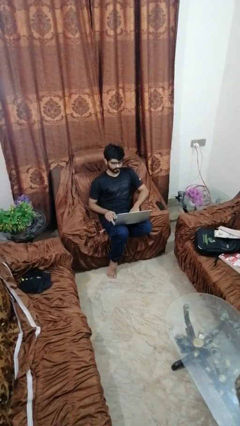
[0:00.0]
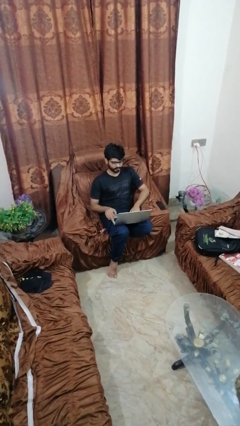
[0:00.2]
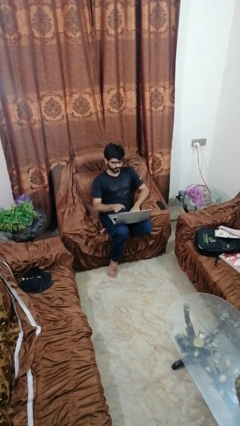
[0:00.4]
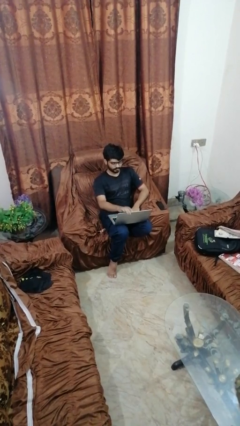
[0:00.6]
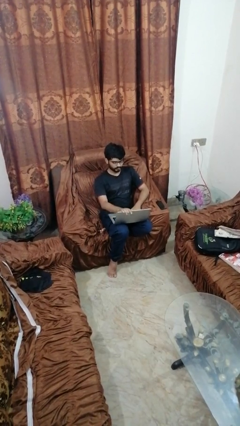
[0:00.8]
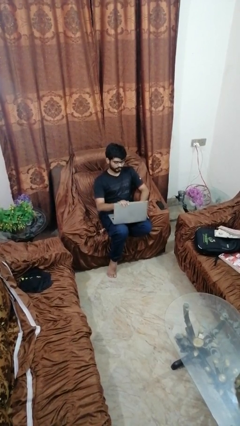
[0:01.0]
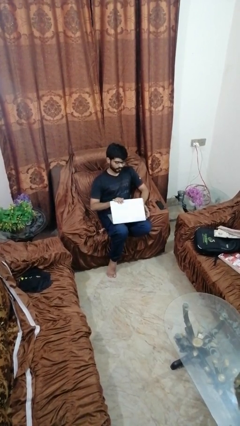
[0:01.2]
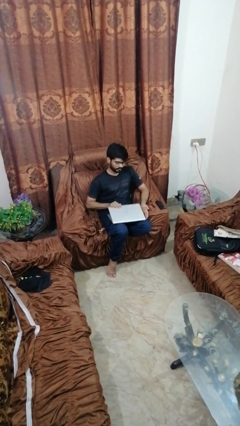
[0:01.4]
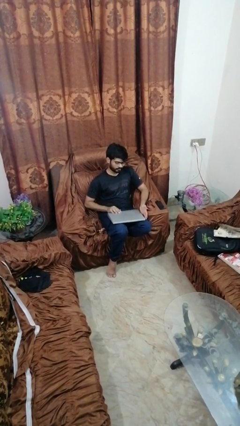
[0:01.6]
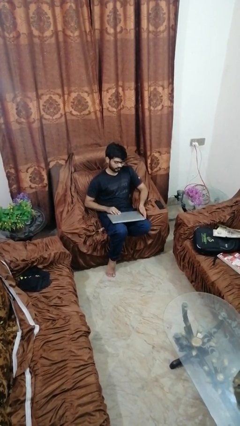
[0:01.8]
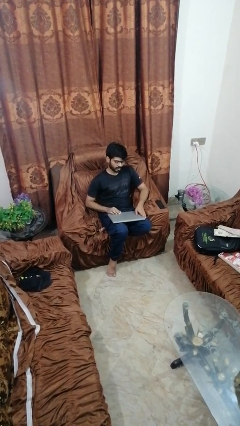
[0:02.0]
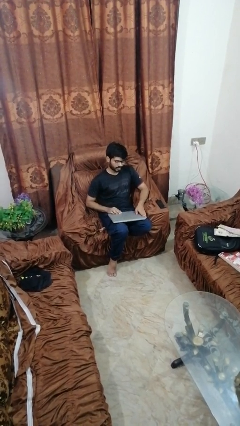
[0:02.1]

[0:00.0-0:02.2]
person closes laptop

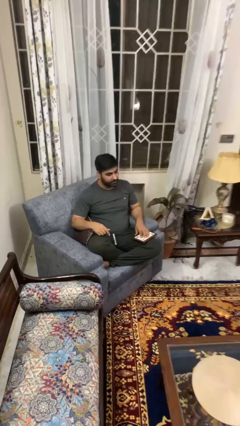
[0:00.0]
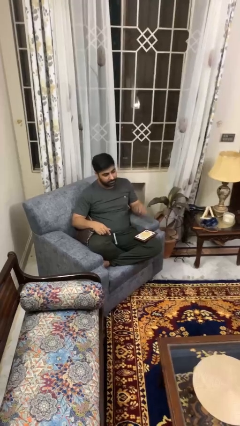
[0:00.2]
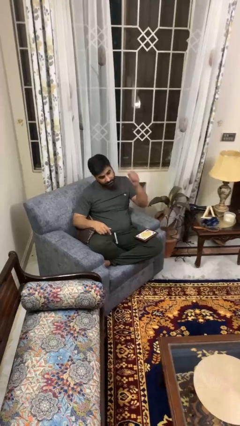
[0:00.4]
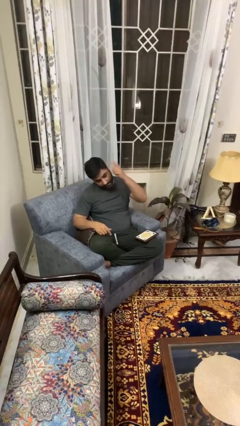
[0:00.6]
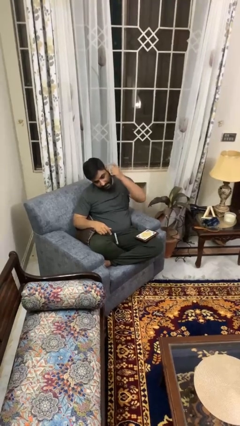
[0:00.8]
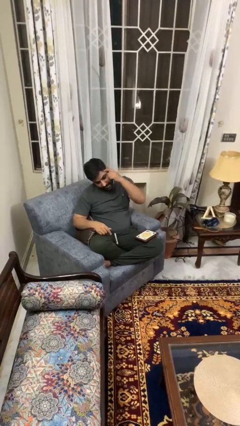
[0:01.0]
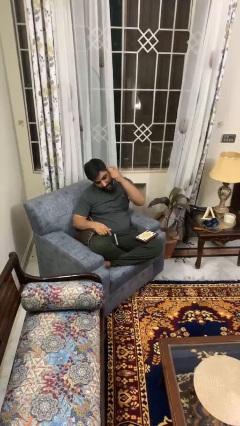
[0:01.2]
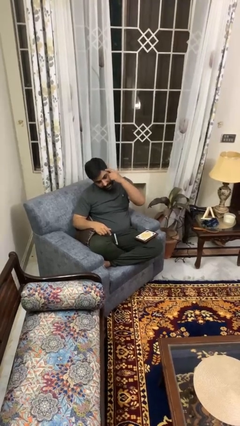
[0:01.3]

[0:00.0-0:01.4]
person pats head

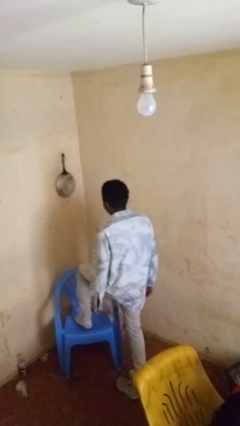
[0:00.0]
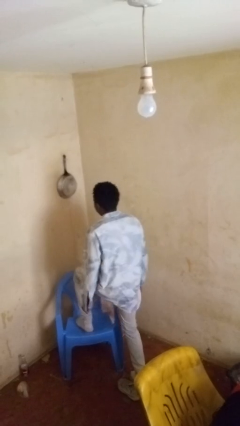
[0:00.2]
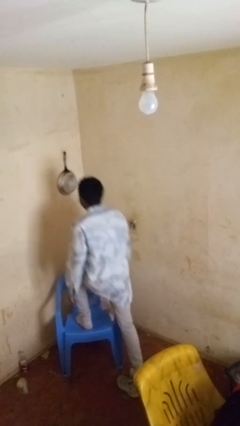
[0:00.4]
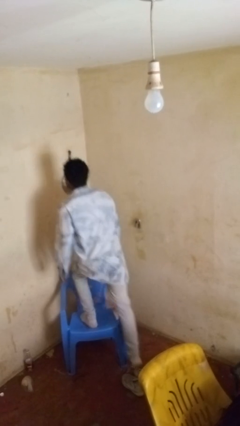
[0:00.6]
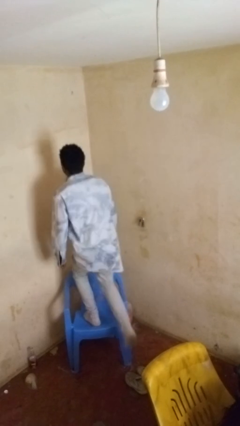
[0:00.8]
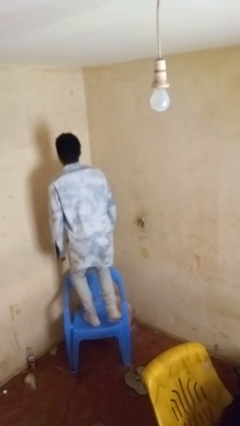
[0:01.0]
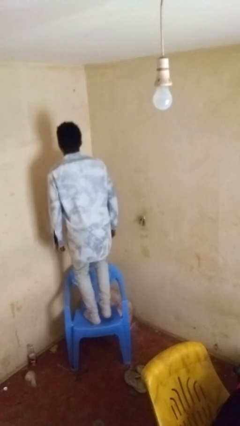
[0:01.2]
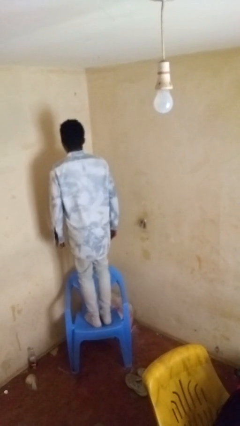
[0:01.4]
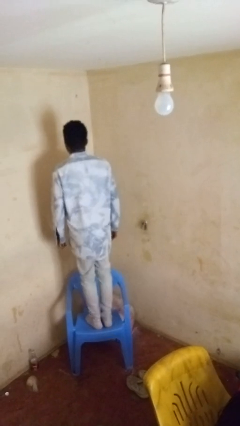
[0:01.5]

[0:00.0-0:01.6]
person climbs on chair

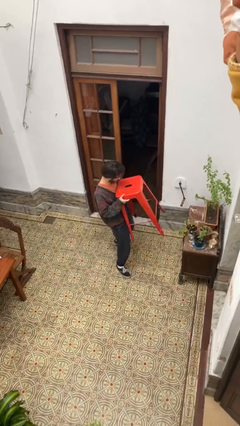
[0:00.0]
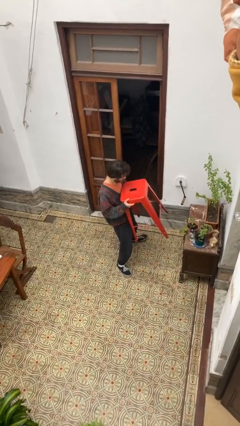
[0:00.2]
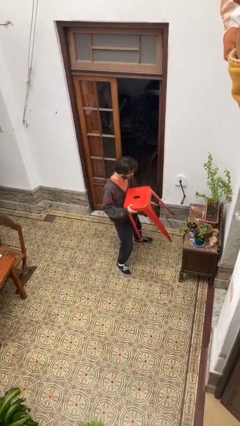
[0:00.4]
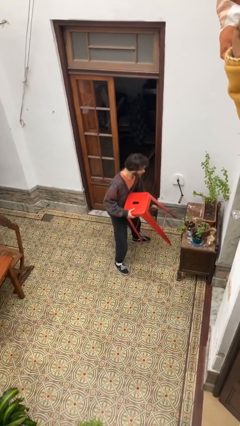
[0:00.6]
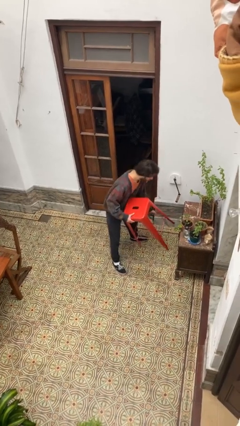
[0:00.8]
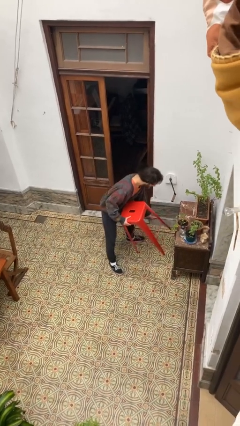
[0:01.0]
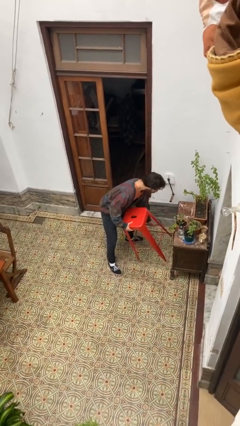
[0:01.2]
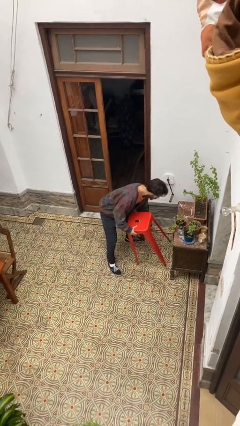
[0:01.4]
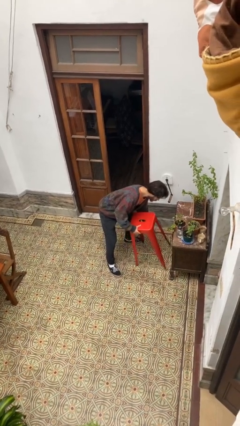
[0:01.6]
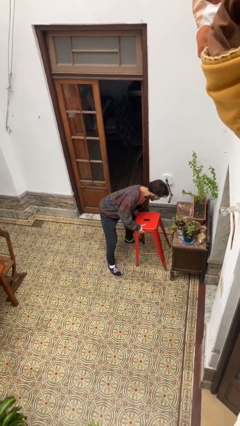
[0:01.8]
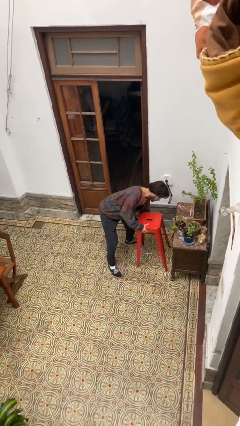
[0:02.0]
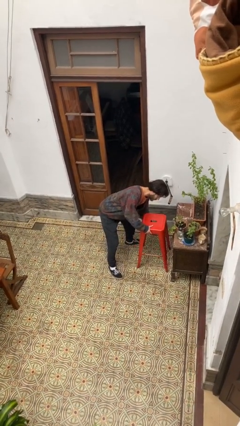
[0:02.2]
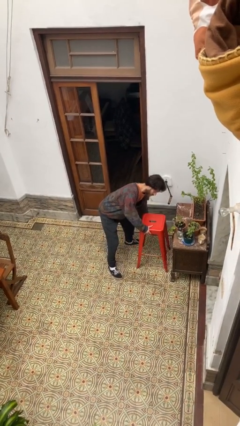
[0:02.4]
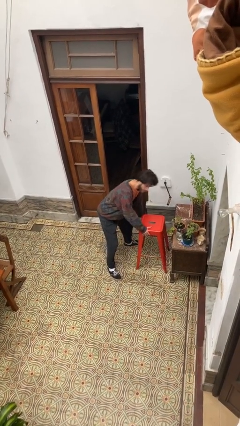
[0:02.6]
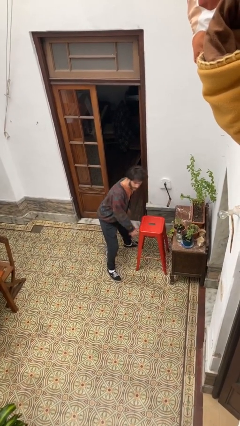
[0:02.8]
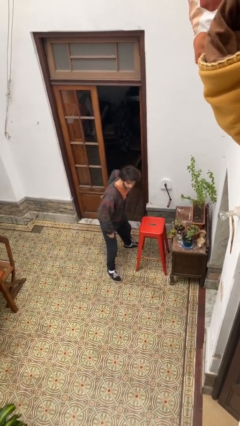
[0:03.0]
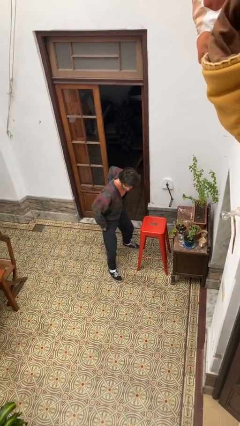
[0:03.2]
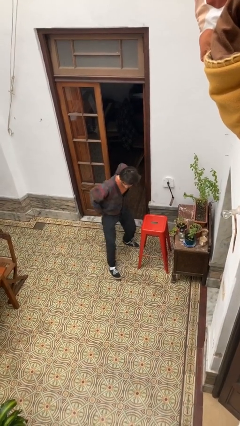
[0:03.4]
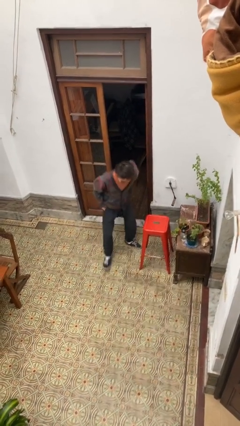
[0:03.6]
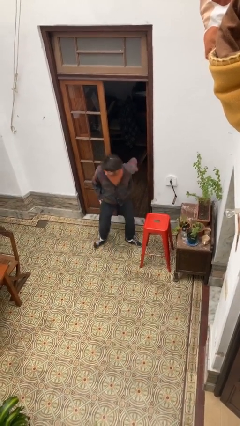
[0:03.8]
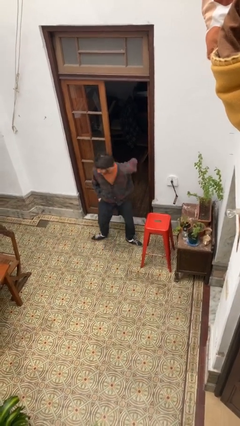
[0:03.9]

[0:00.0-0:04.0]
person puts down object on floor

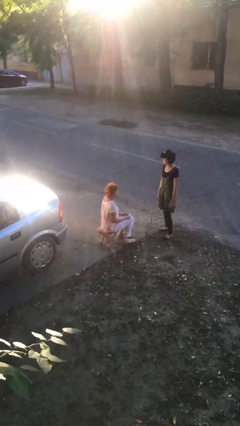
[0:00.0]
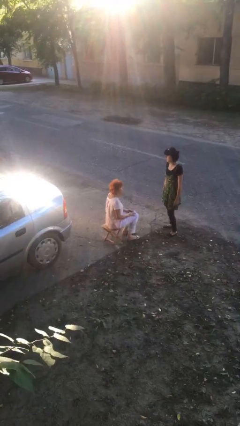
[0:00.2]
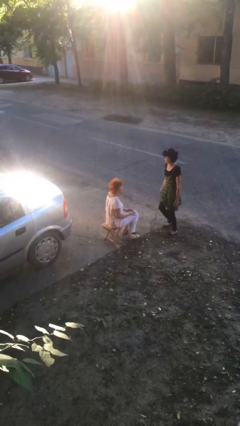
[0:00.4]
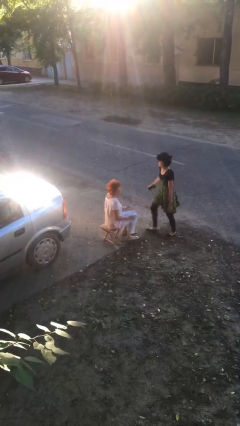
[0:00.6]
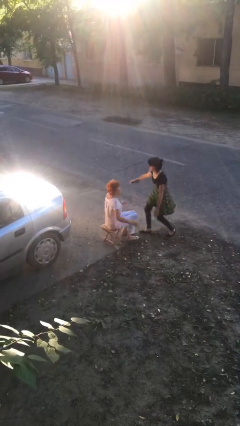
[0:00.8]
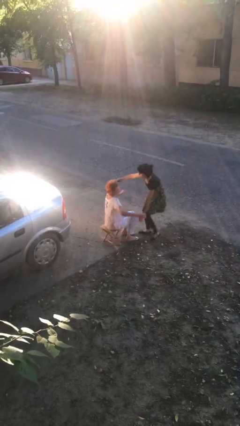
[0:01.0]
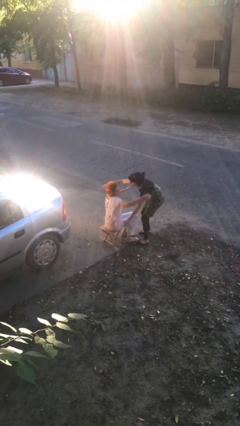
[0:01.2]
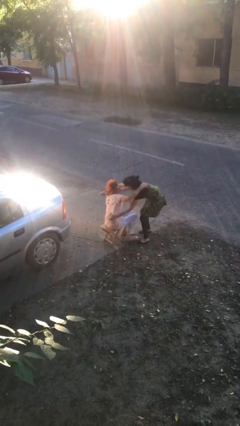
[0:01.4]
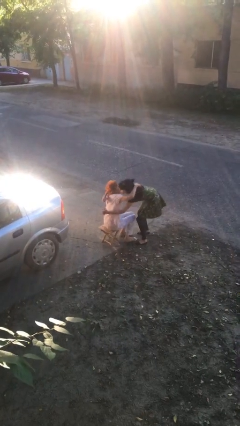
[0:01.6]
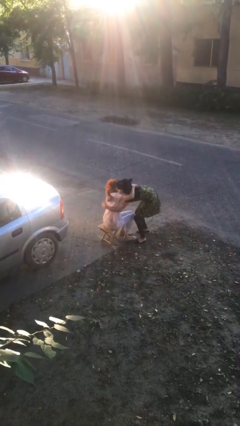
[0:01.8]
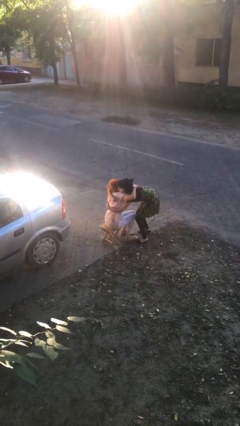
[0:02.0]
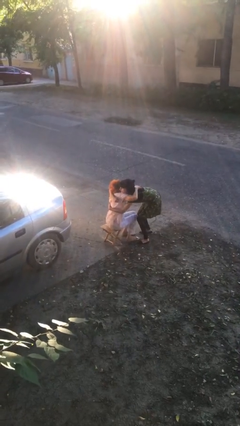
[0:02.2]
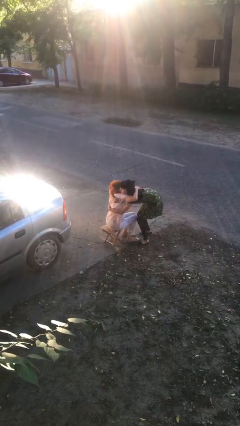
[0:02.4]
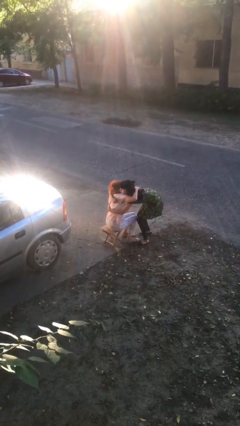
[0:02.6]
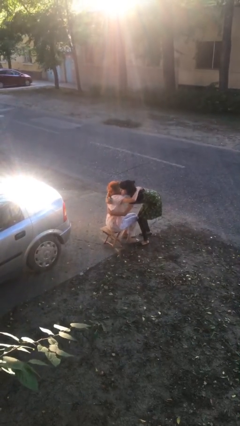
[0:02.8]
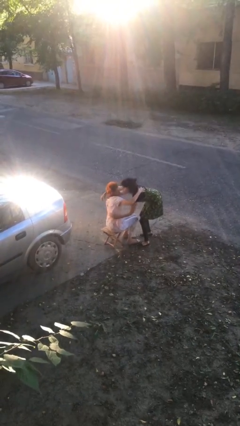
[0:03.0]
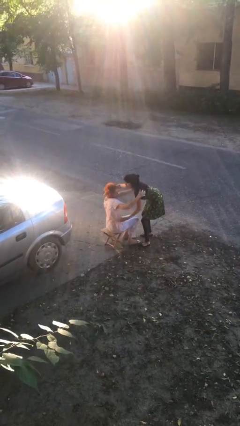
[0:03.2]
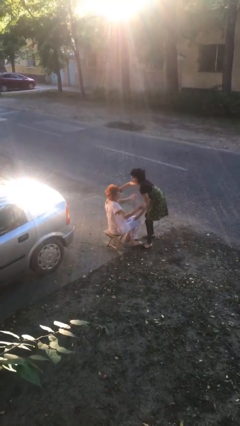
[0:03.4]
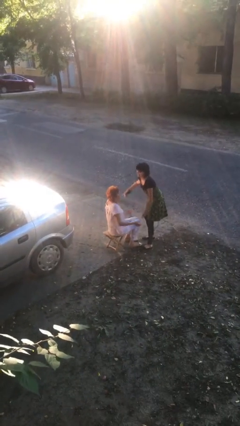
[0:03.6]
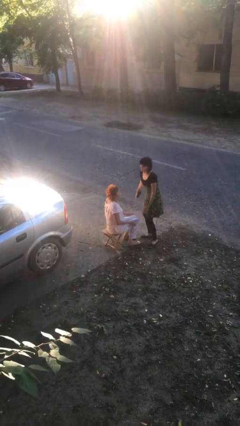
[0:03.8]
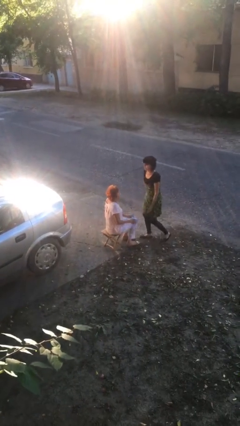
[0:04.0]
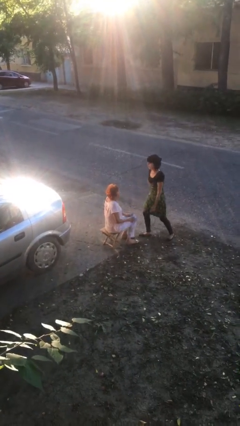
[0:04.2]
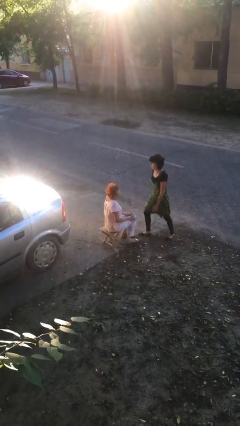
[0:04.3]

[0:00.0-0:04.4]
person embraces person

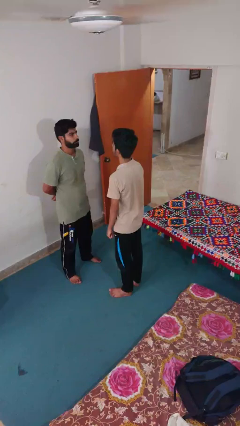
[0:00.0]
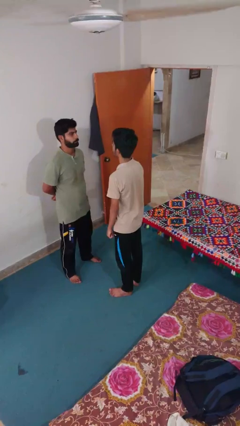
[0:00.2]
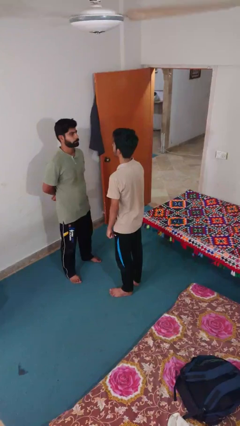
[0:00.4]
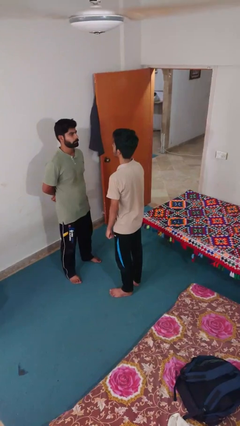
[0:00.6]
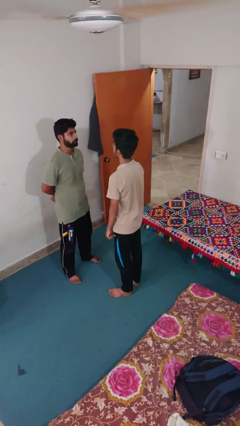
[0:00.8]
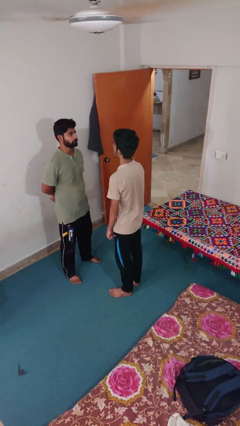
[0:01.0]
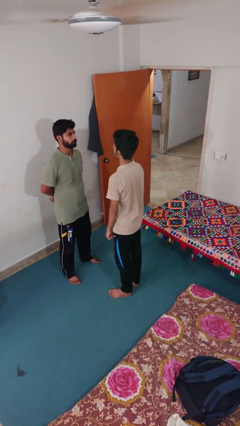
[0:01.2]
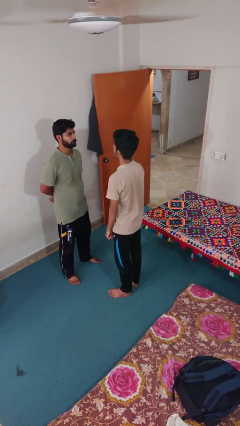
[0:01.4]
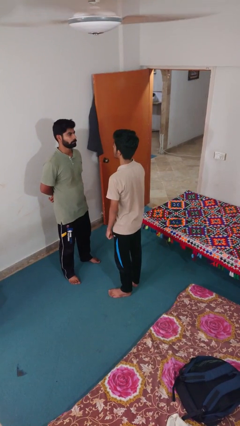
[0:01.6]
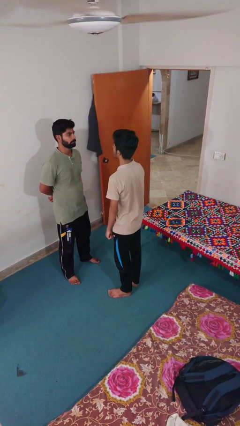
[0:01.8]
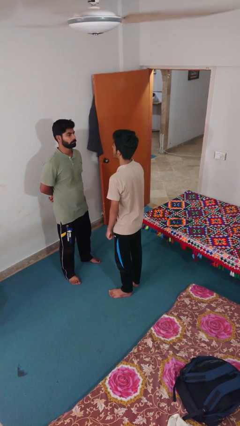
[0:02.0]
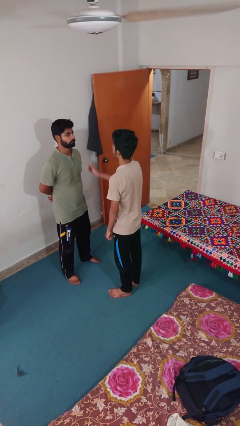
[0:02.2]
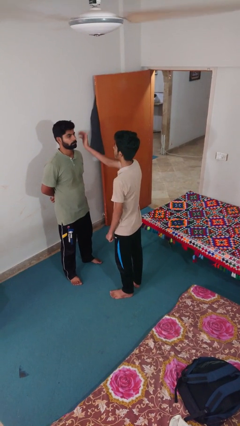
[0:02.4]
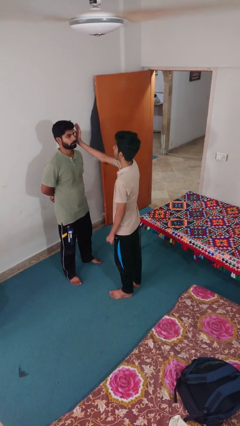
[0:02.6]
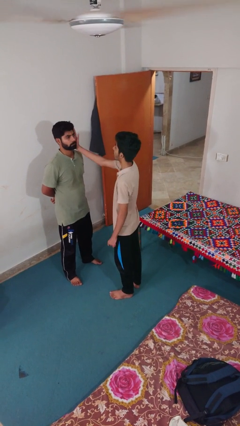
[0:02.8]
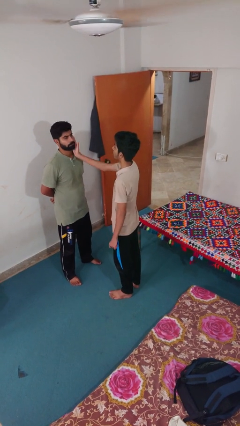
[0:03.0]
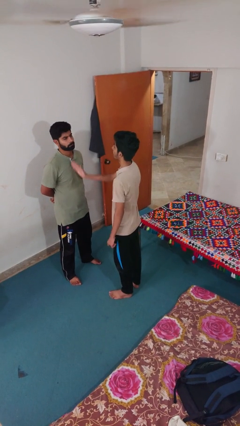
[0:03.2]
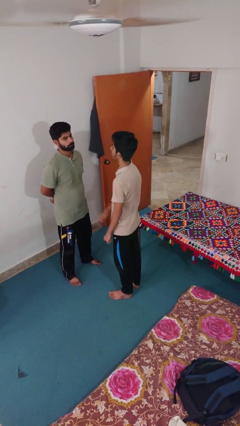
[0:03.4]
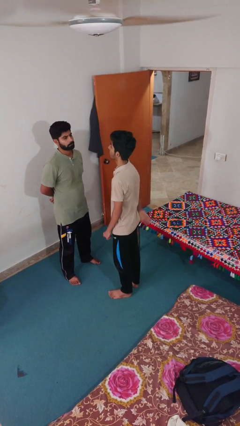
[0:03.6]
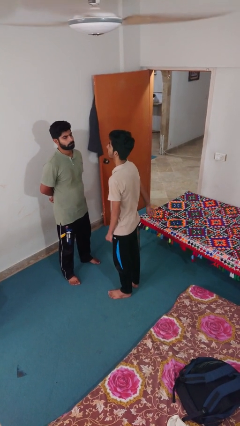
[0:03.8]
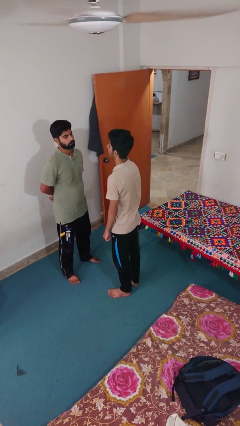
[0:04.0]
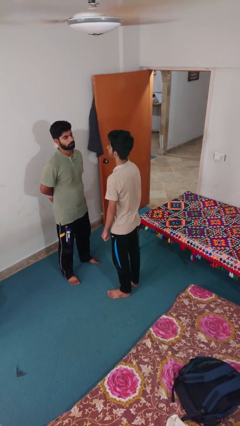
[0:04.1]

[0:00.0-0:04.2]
person touches face of person
